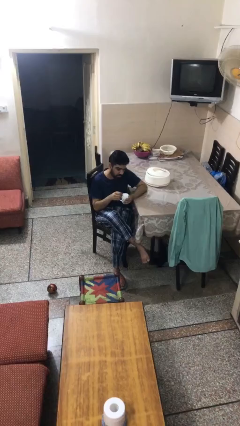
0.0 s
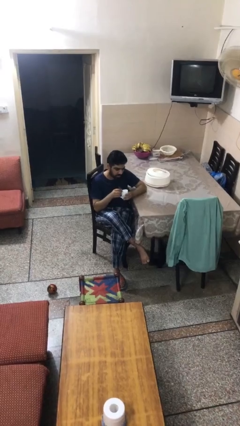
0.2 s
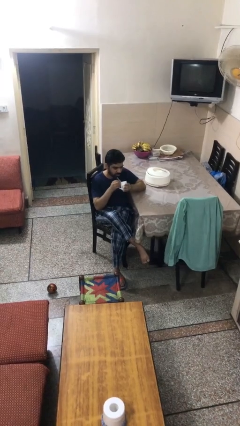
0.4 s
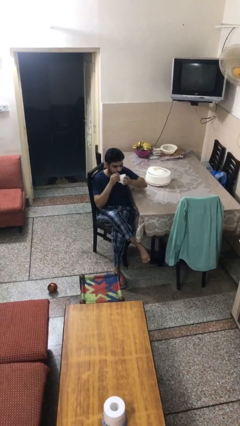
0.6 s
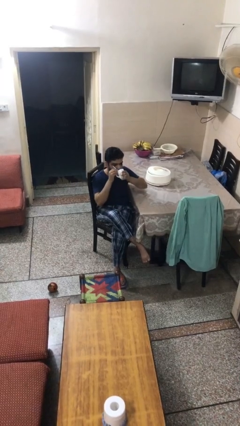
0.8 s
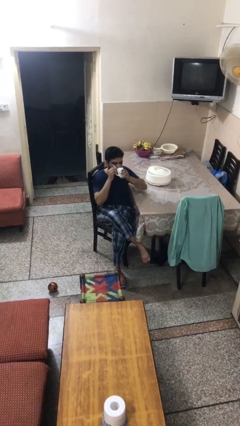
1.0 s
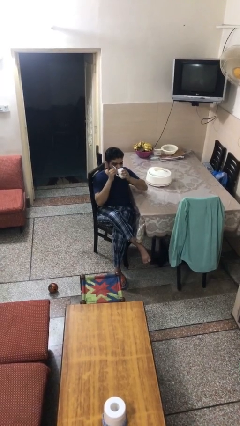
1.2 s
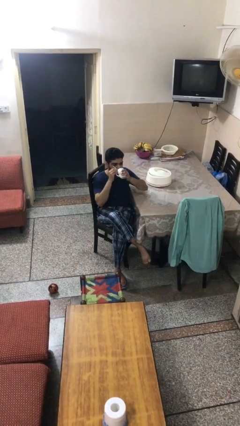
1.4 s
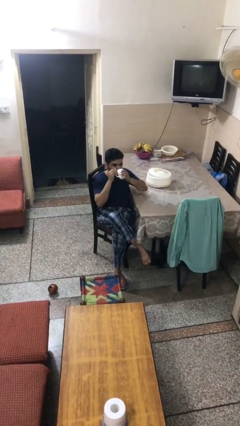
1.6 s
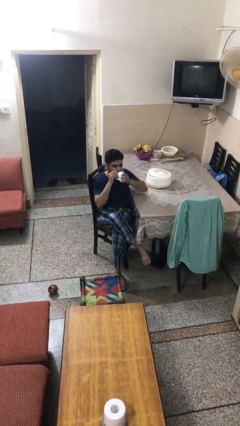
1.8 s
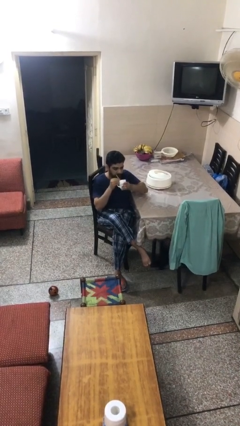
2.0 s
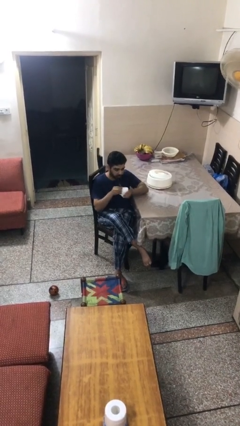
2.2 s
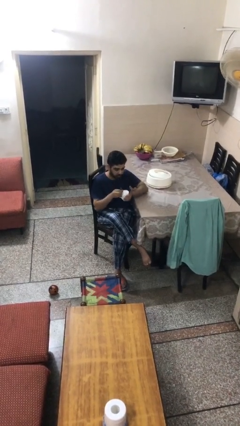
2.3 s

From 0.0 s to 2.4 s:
person drinks from mug

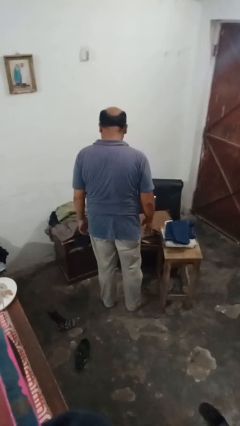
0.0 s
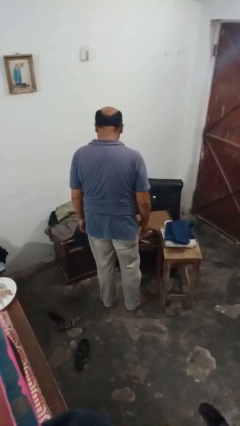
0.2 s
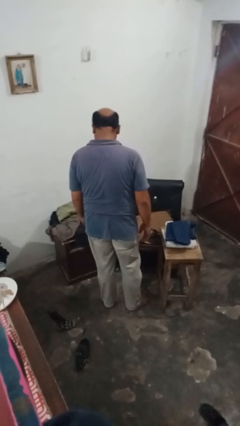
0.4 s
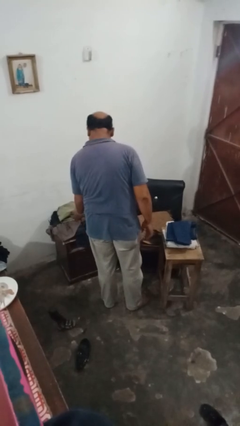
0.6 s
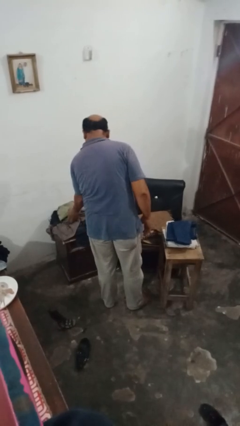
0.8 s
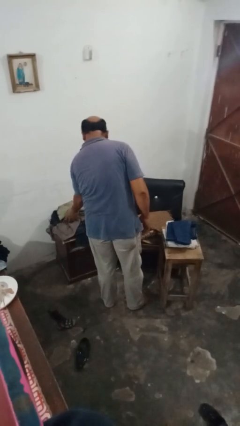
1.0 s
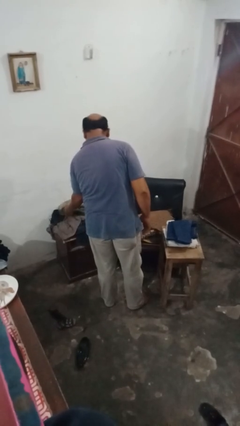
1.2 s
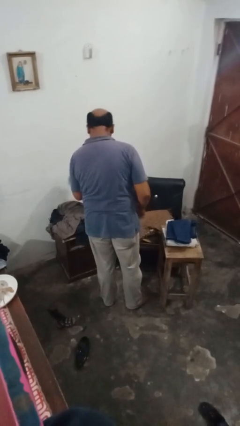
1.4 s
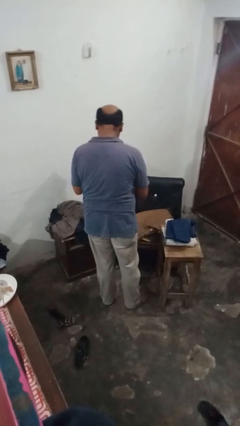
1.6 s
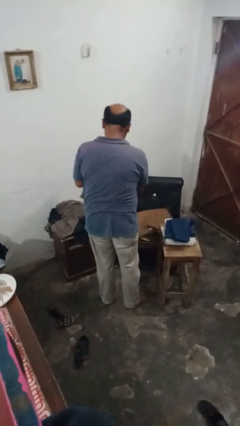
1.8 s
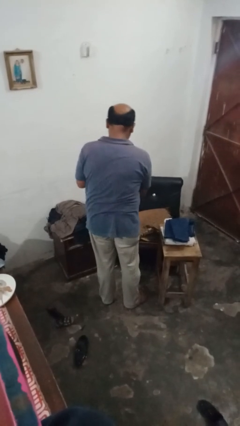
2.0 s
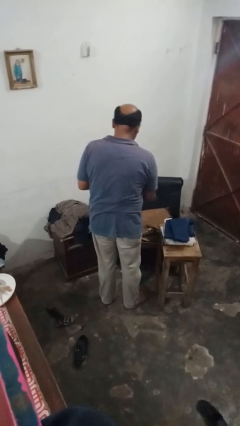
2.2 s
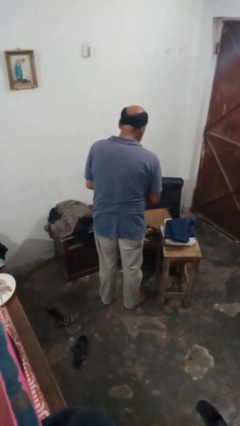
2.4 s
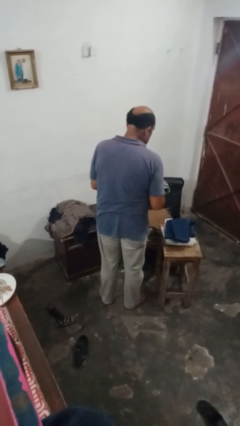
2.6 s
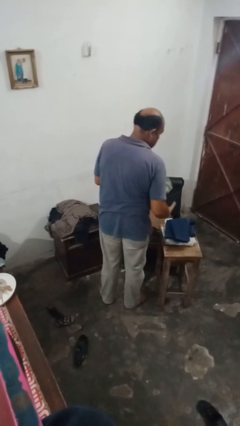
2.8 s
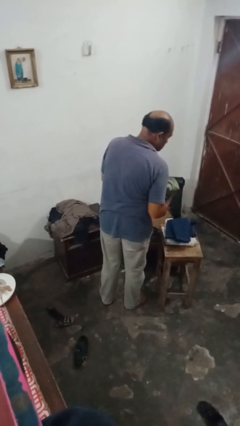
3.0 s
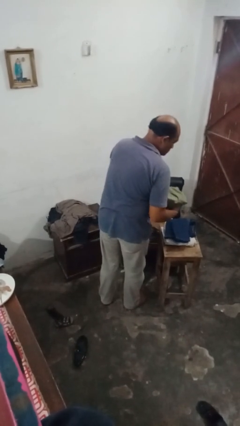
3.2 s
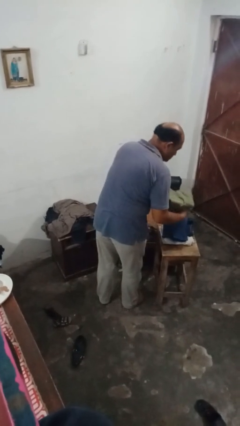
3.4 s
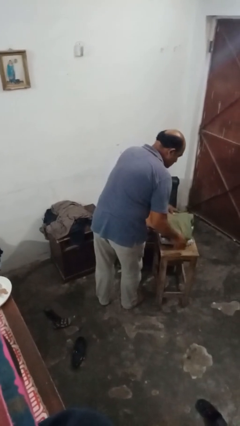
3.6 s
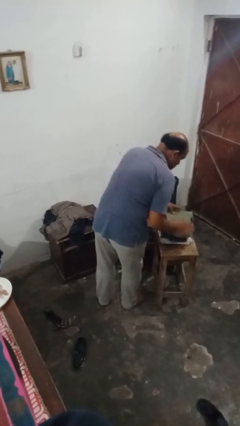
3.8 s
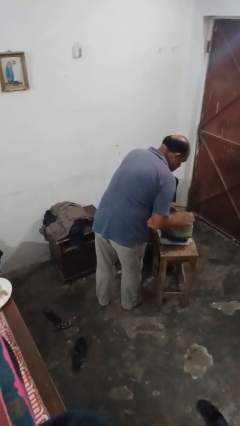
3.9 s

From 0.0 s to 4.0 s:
person folds pants

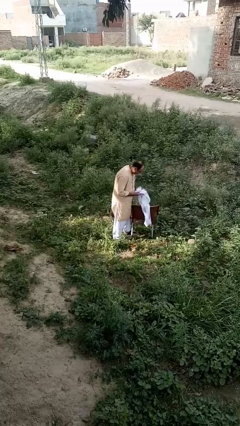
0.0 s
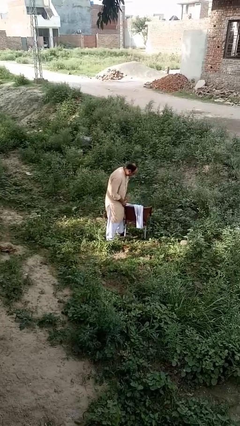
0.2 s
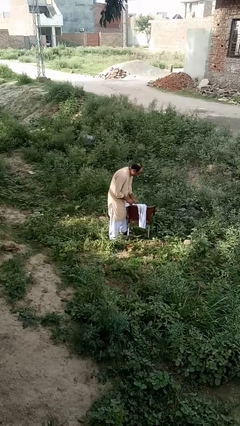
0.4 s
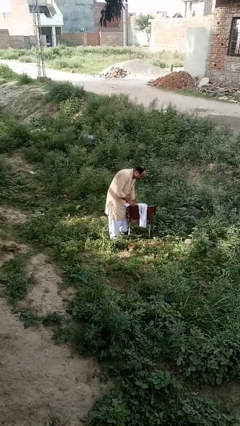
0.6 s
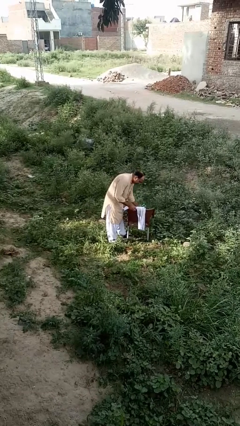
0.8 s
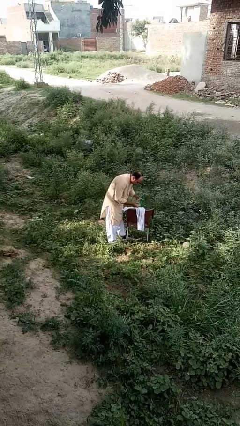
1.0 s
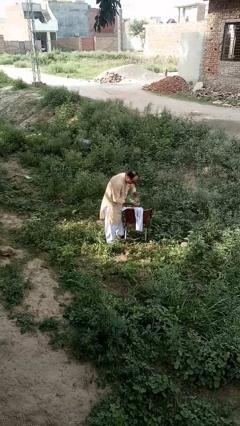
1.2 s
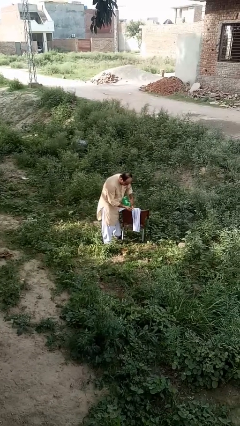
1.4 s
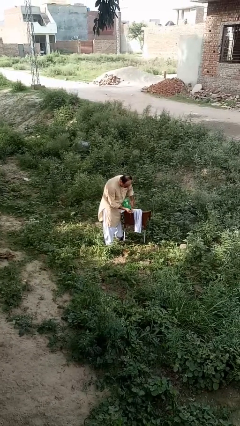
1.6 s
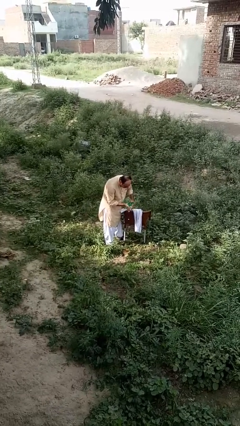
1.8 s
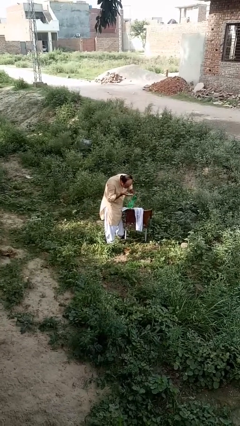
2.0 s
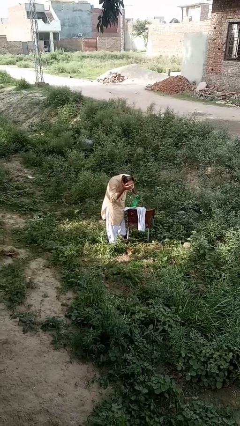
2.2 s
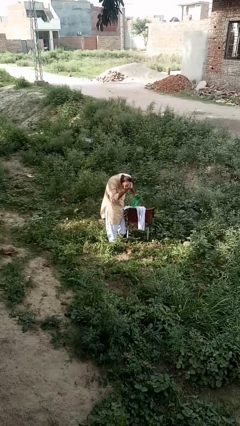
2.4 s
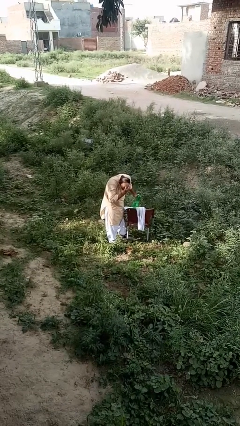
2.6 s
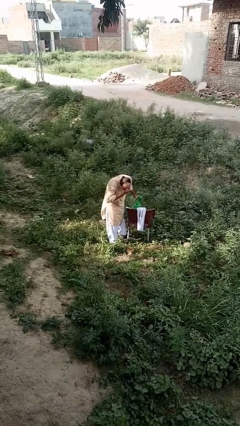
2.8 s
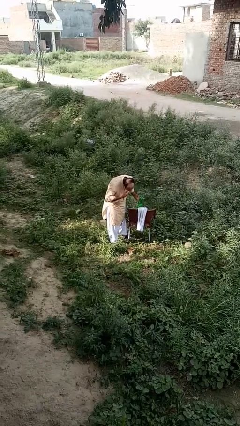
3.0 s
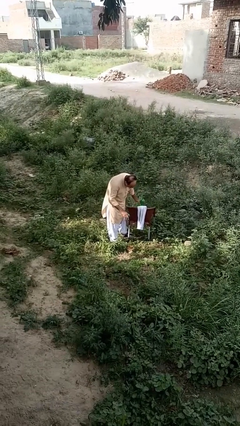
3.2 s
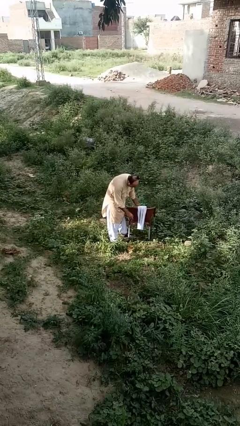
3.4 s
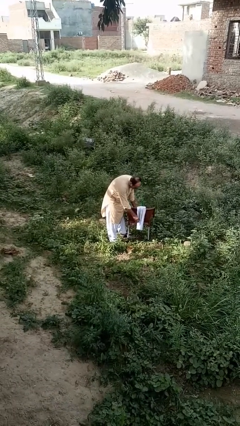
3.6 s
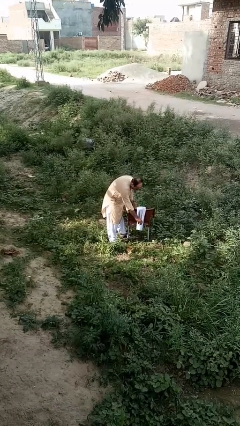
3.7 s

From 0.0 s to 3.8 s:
person washes face

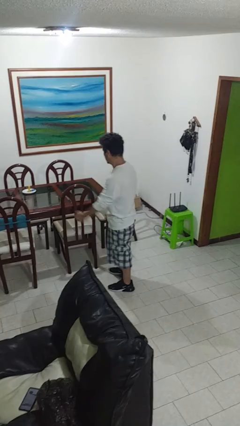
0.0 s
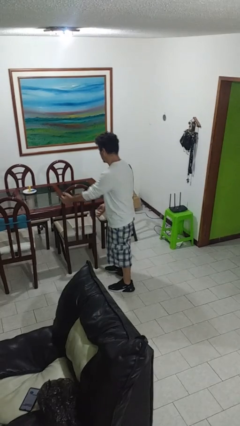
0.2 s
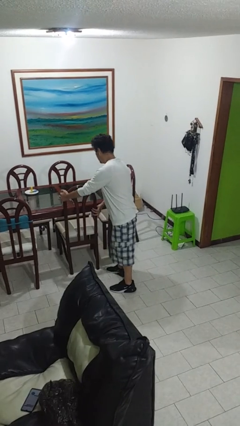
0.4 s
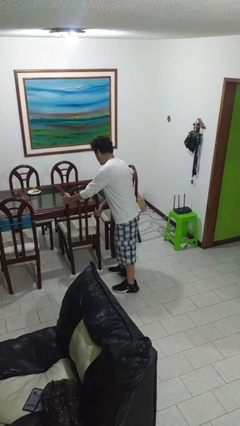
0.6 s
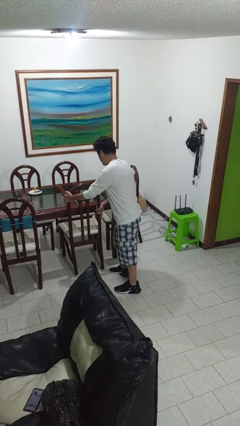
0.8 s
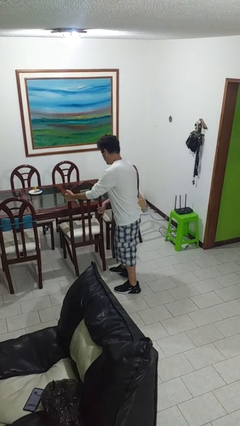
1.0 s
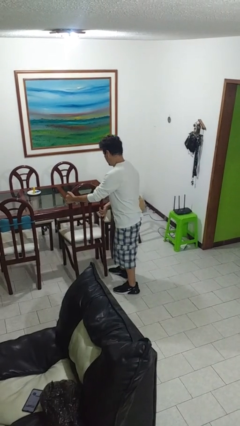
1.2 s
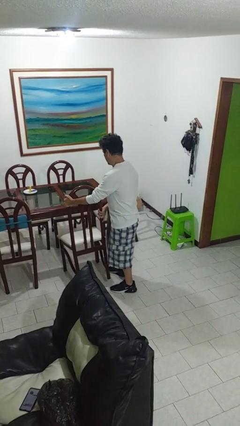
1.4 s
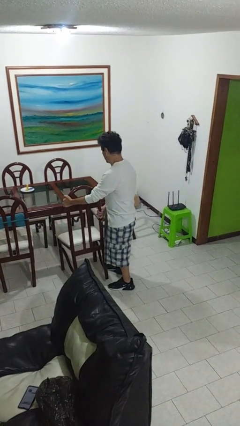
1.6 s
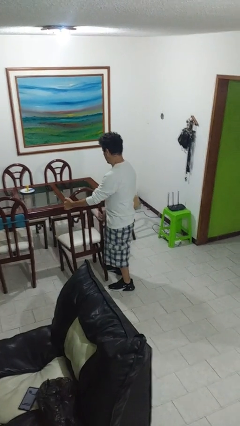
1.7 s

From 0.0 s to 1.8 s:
person pulls out chair

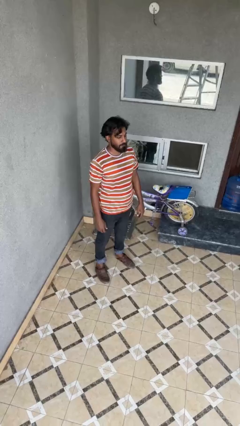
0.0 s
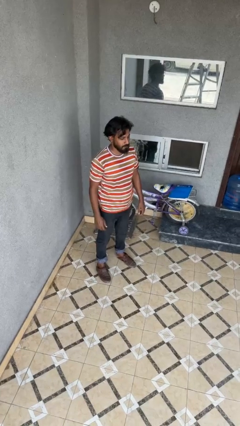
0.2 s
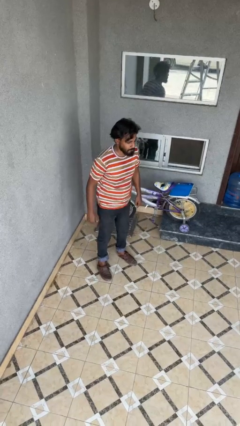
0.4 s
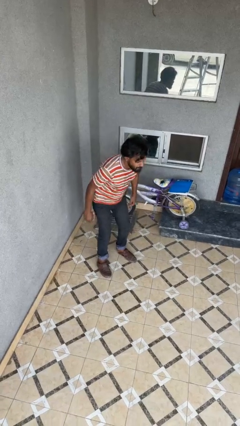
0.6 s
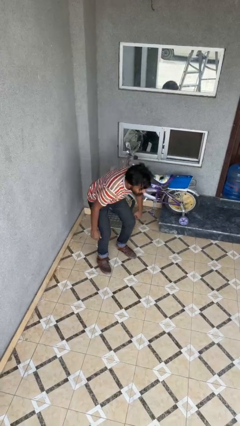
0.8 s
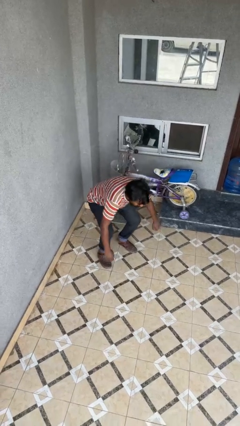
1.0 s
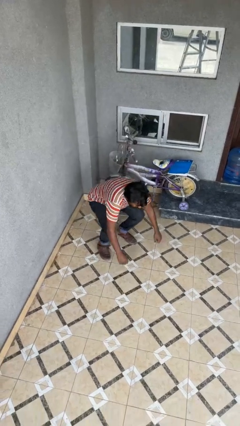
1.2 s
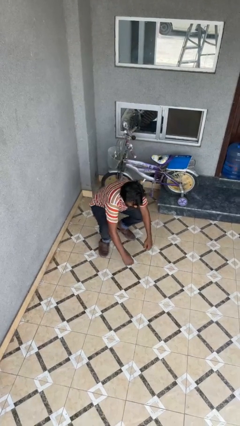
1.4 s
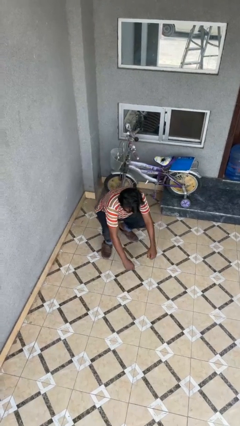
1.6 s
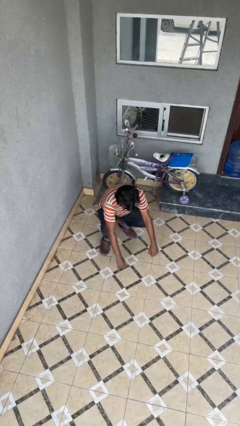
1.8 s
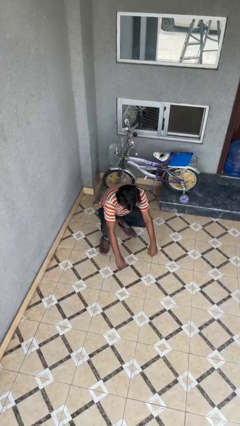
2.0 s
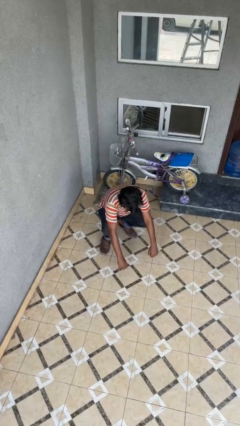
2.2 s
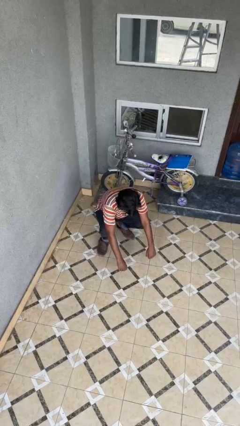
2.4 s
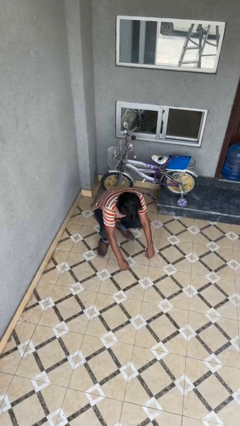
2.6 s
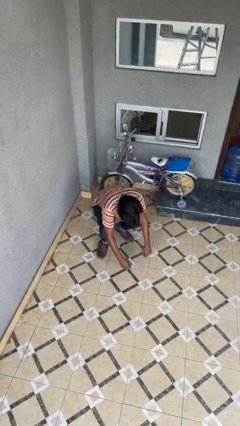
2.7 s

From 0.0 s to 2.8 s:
person squats

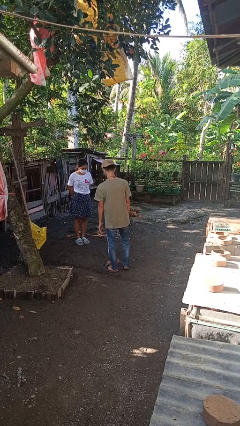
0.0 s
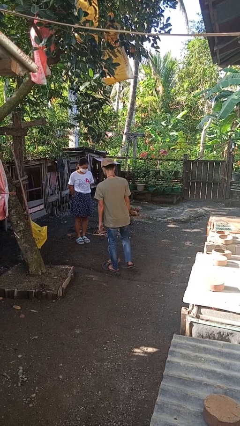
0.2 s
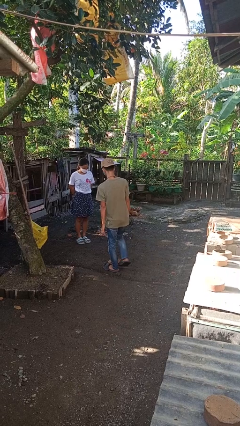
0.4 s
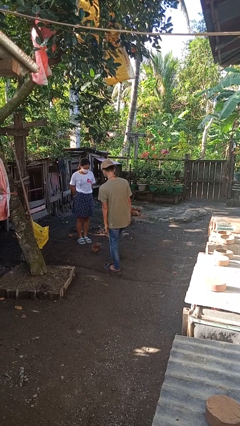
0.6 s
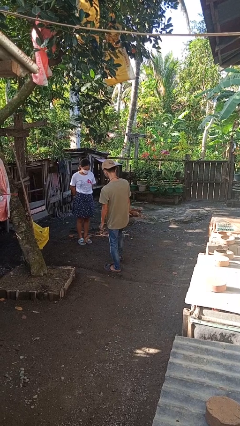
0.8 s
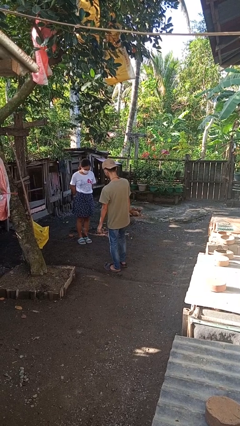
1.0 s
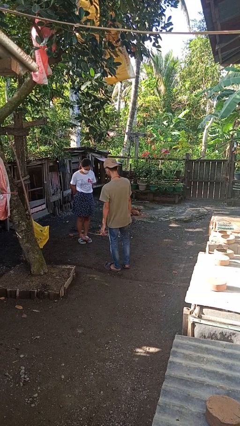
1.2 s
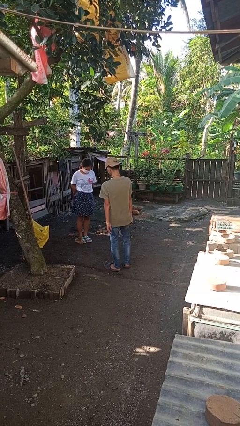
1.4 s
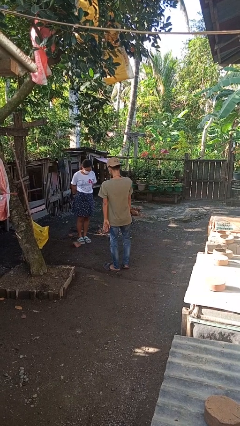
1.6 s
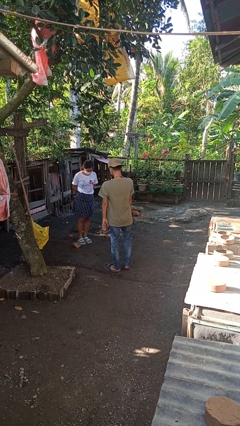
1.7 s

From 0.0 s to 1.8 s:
person kicks object to person
